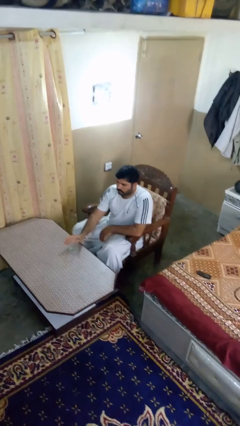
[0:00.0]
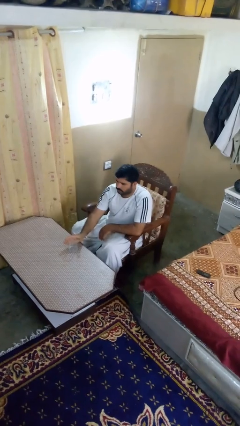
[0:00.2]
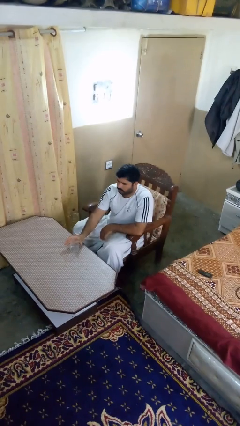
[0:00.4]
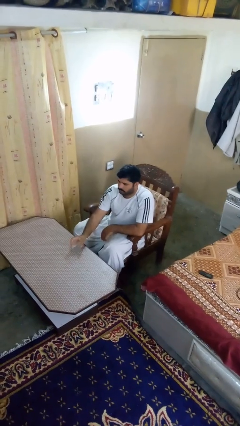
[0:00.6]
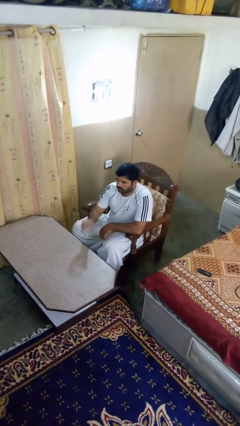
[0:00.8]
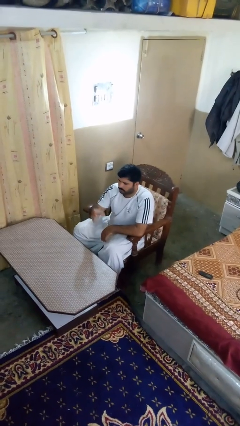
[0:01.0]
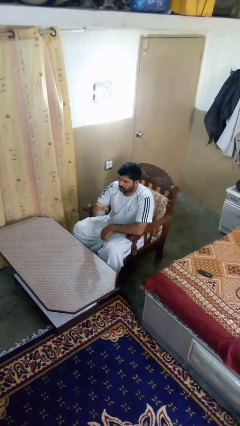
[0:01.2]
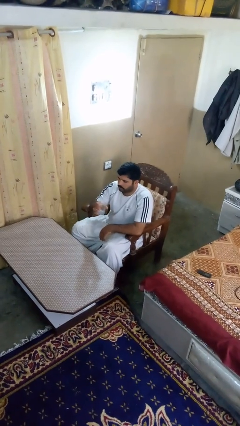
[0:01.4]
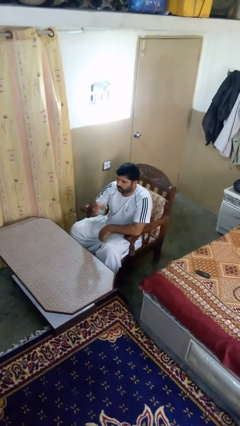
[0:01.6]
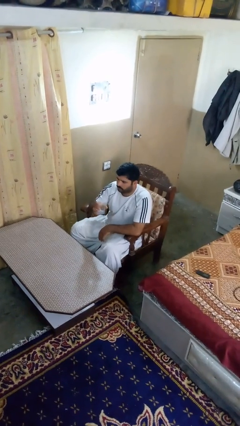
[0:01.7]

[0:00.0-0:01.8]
person picks up object from table

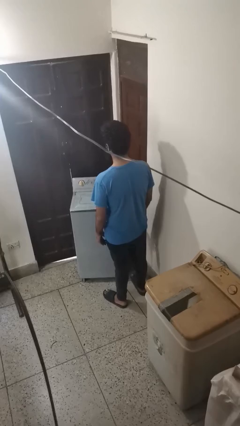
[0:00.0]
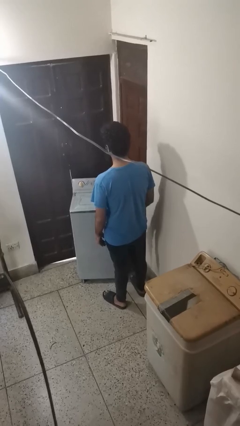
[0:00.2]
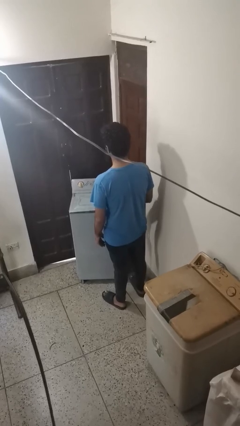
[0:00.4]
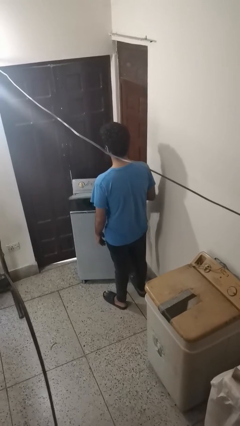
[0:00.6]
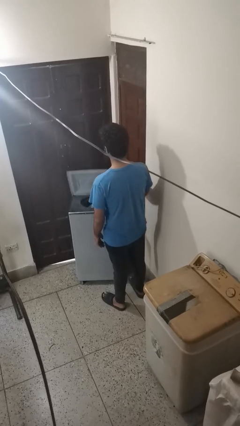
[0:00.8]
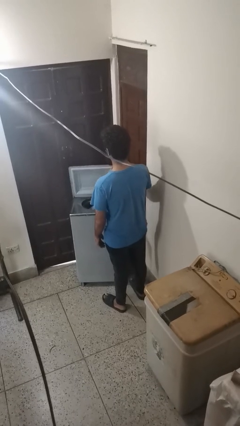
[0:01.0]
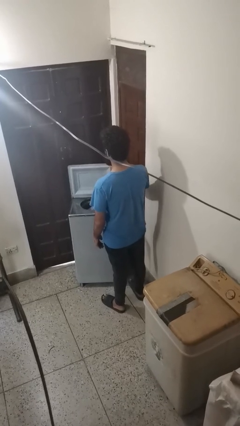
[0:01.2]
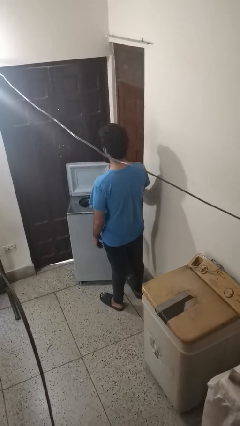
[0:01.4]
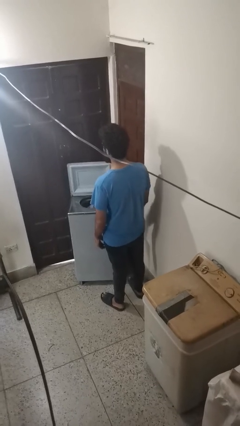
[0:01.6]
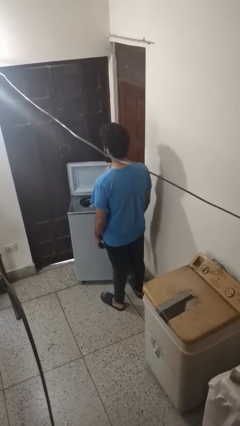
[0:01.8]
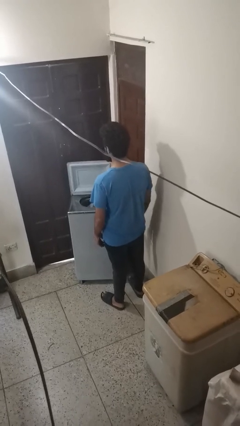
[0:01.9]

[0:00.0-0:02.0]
person opens clothes washer

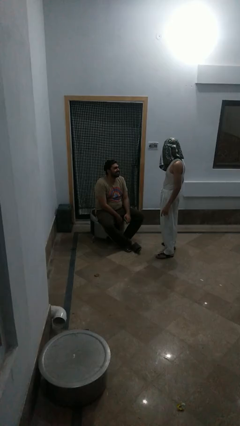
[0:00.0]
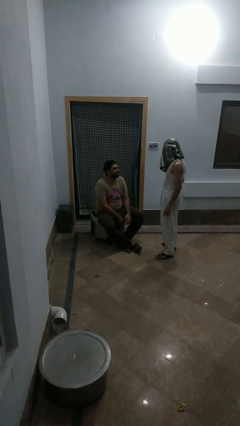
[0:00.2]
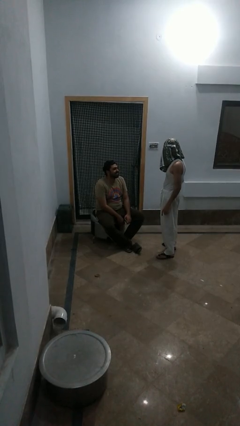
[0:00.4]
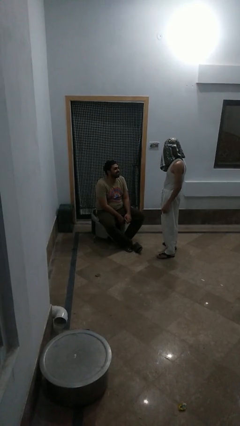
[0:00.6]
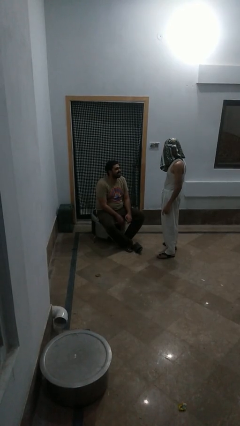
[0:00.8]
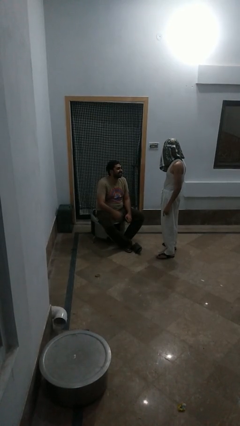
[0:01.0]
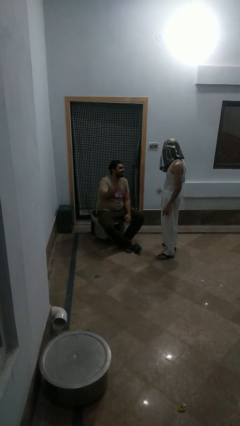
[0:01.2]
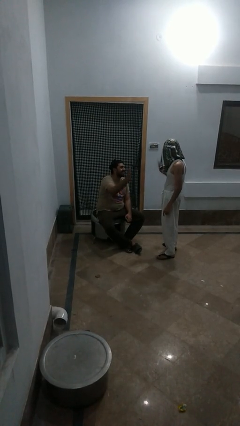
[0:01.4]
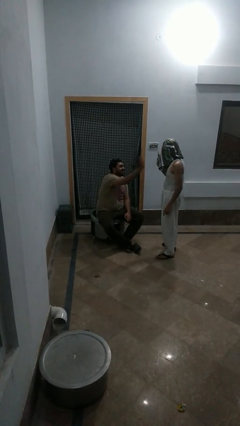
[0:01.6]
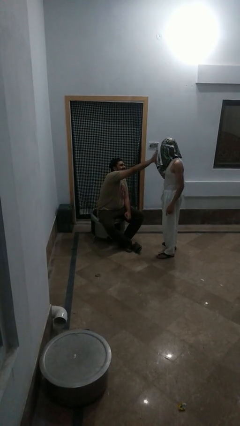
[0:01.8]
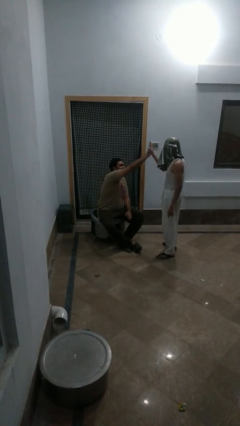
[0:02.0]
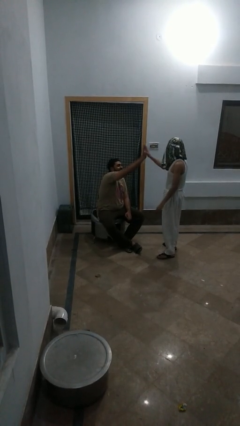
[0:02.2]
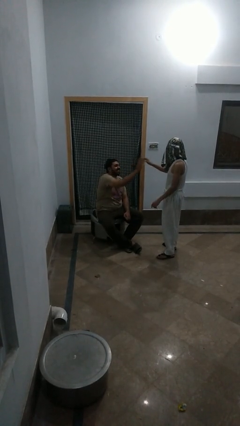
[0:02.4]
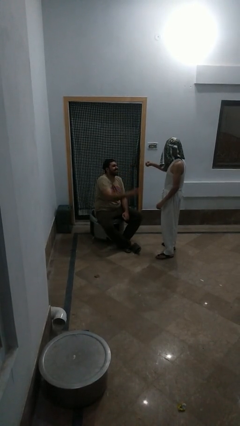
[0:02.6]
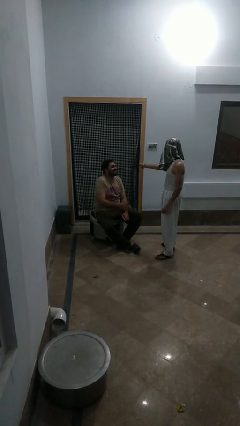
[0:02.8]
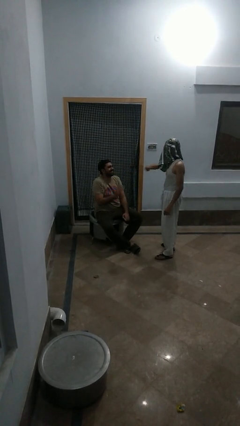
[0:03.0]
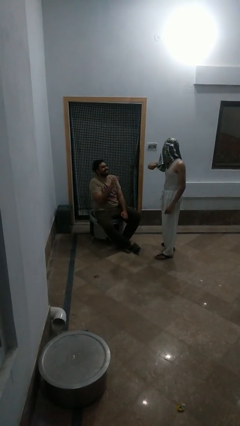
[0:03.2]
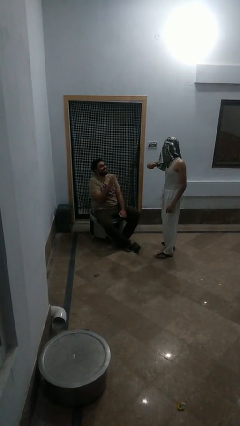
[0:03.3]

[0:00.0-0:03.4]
person highfives hand

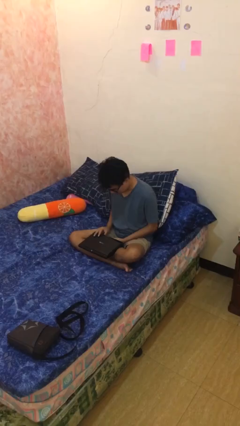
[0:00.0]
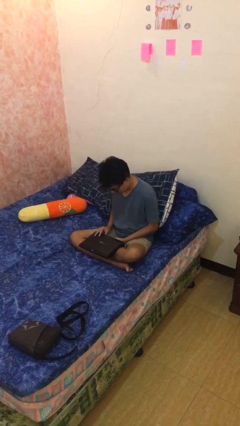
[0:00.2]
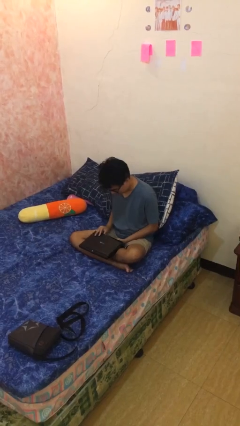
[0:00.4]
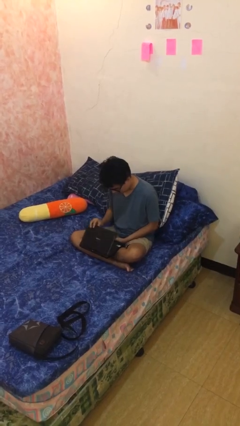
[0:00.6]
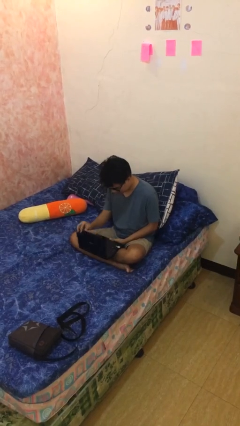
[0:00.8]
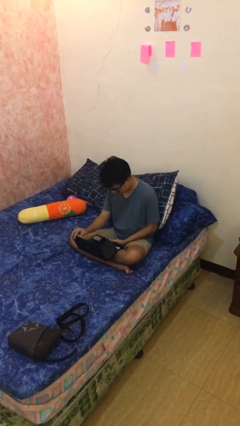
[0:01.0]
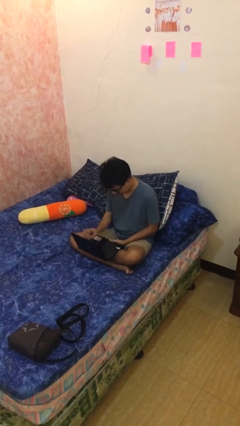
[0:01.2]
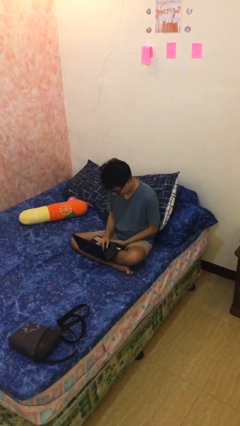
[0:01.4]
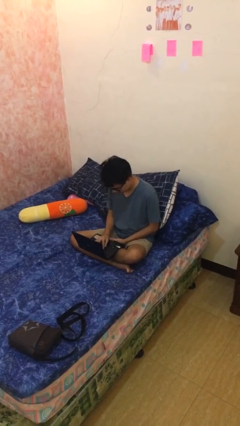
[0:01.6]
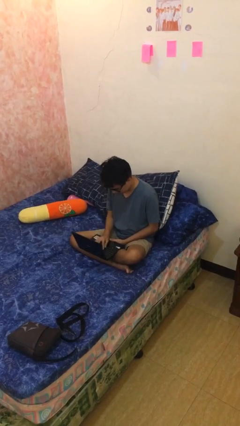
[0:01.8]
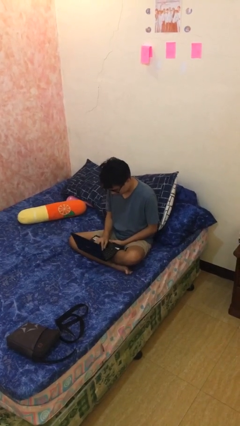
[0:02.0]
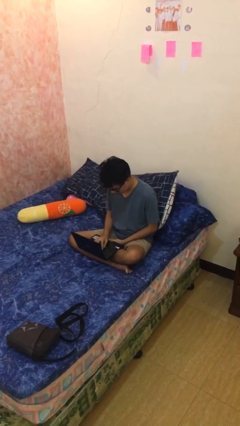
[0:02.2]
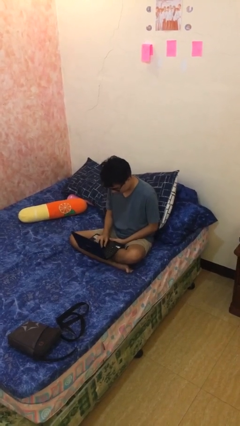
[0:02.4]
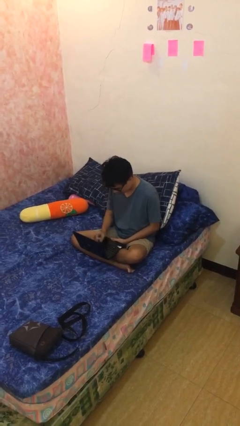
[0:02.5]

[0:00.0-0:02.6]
person interacts with laptop

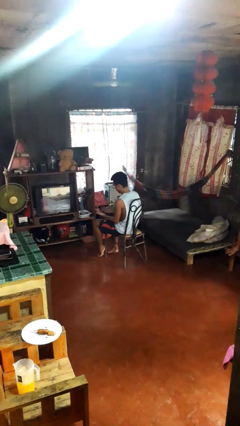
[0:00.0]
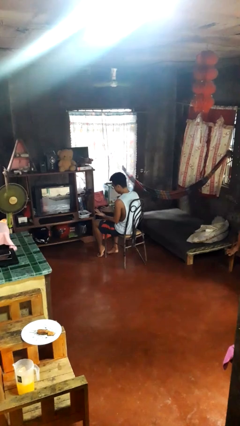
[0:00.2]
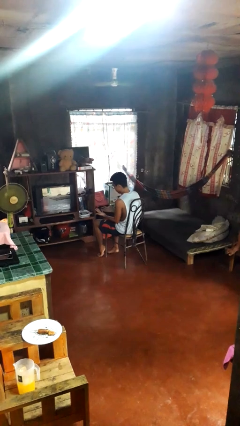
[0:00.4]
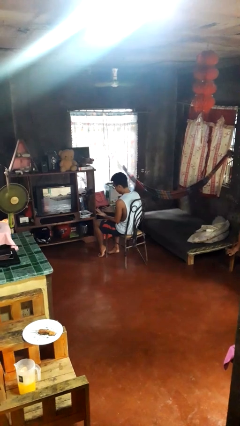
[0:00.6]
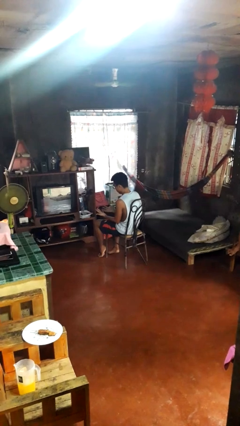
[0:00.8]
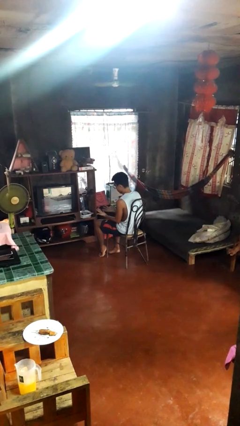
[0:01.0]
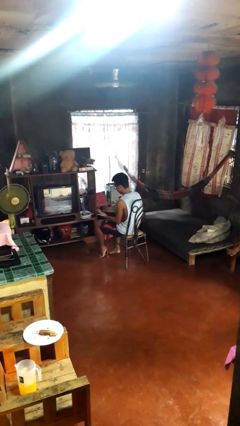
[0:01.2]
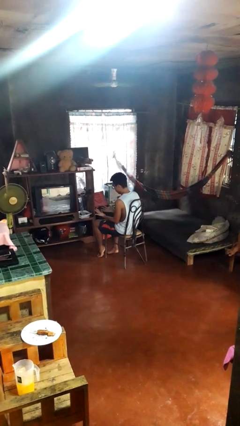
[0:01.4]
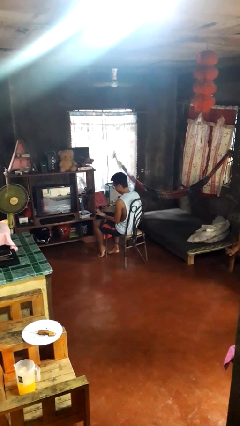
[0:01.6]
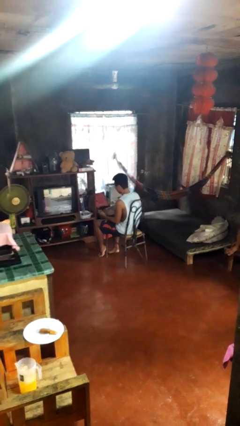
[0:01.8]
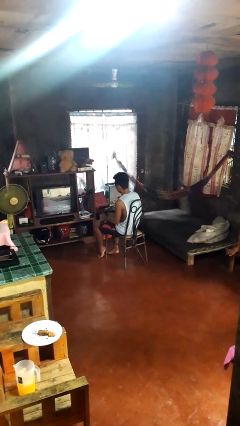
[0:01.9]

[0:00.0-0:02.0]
person looks at hands in lap

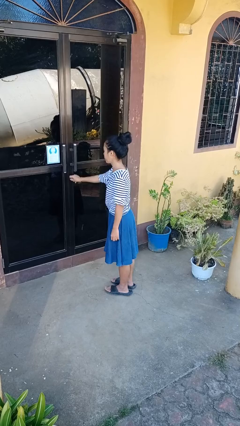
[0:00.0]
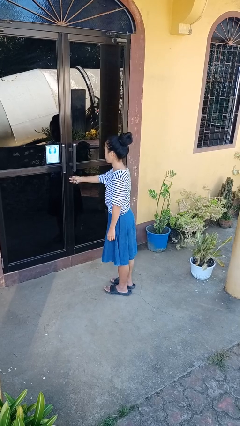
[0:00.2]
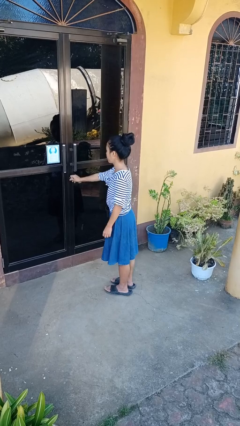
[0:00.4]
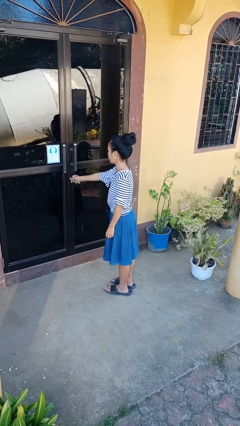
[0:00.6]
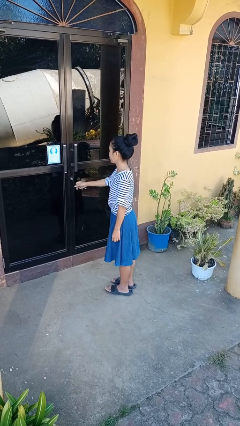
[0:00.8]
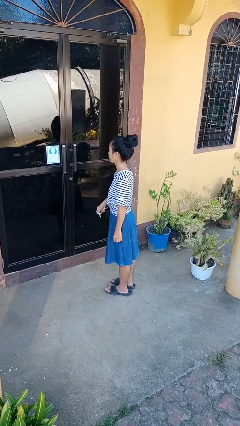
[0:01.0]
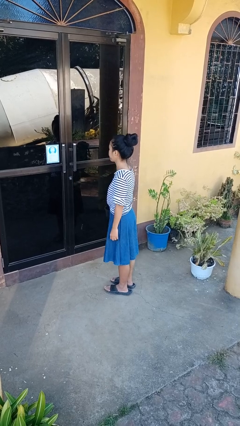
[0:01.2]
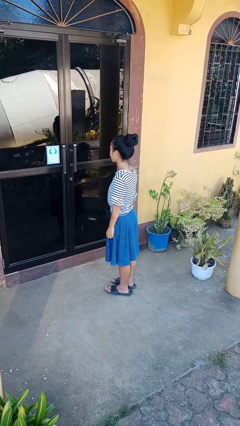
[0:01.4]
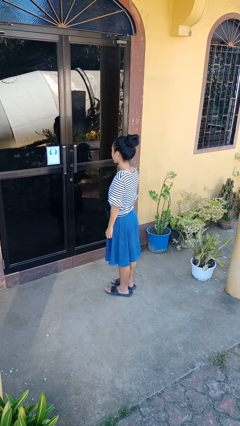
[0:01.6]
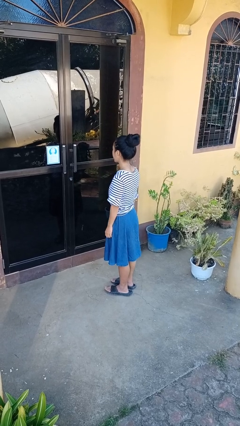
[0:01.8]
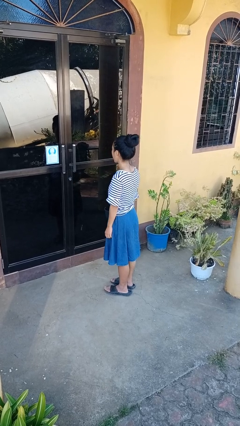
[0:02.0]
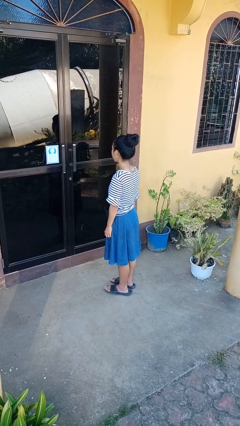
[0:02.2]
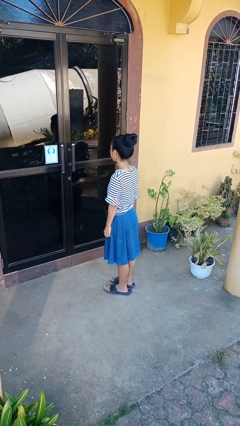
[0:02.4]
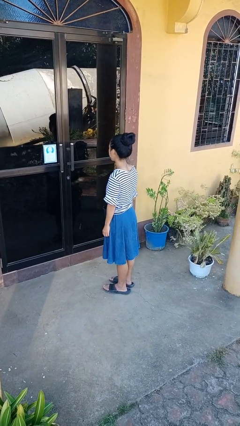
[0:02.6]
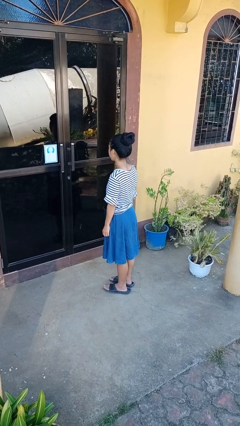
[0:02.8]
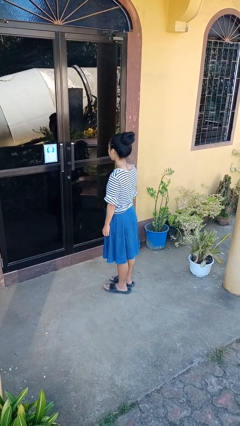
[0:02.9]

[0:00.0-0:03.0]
person locks door with keys

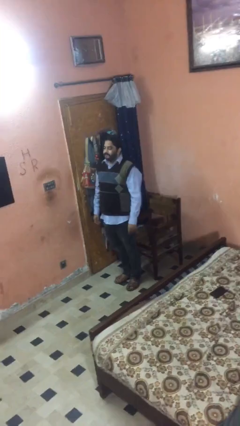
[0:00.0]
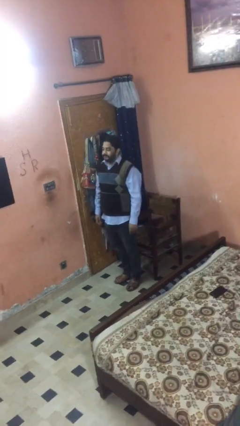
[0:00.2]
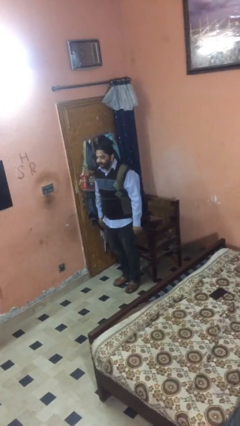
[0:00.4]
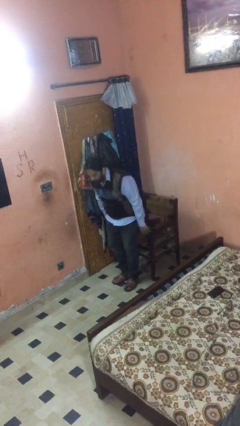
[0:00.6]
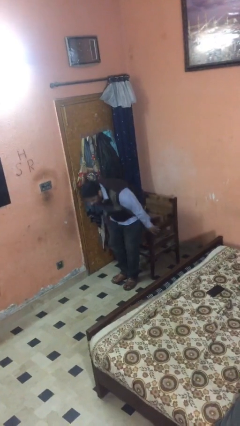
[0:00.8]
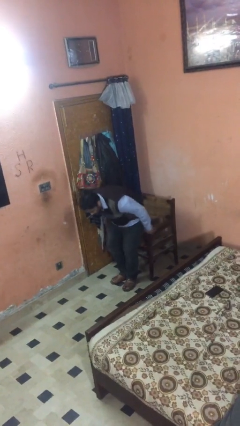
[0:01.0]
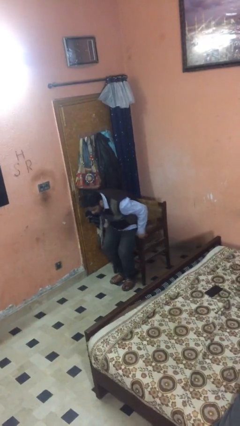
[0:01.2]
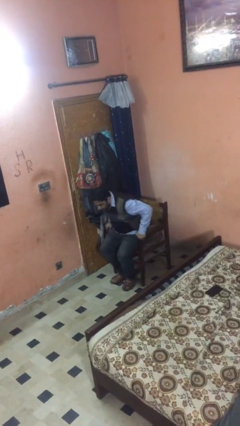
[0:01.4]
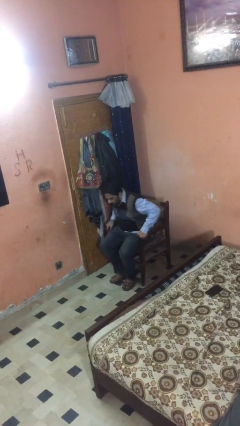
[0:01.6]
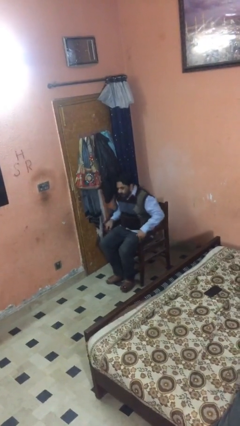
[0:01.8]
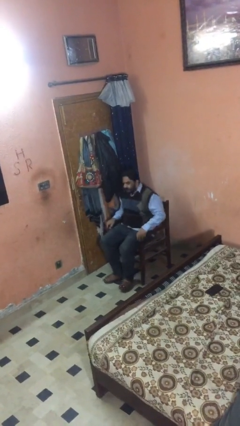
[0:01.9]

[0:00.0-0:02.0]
person sits down
